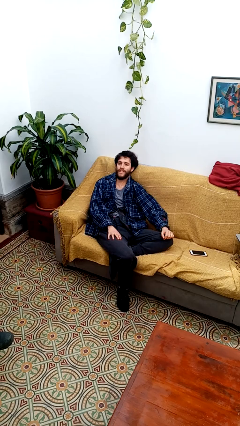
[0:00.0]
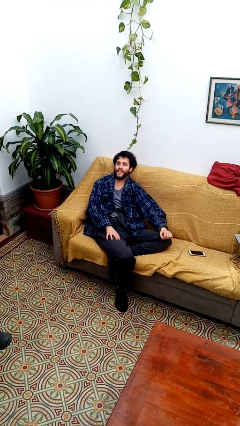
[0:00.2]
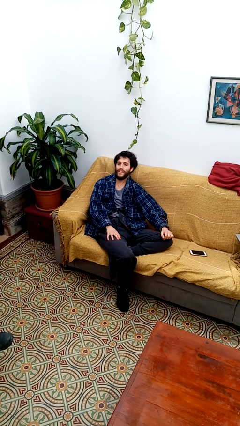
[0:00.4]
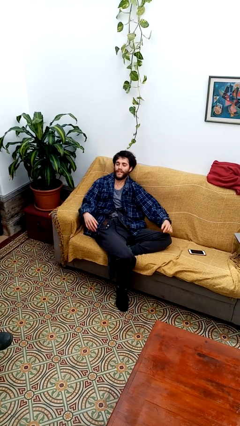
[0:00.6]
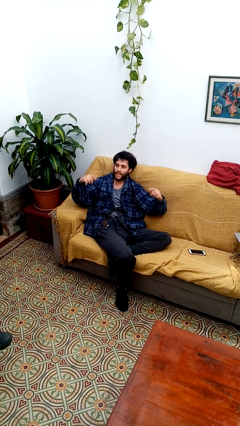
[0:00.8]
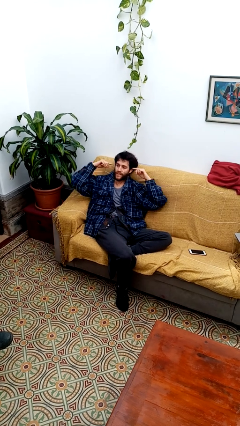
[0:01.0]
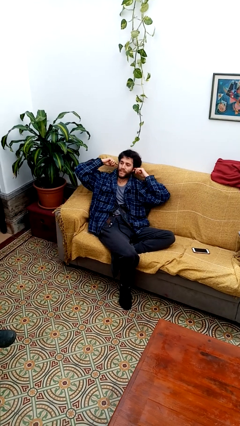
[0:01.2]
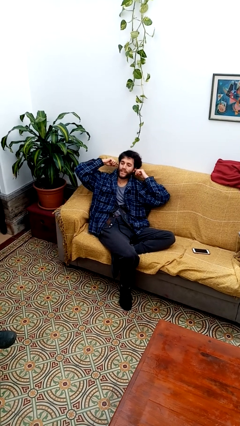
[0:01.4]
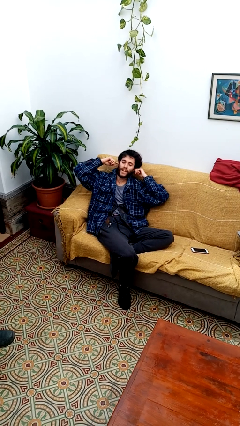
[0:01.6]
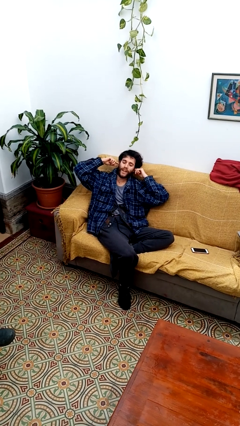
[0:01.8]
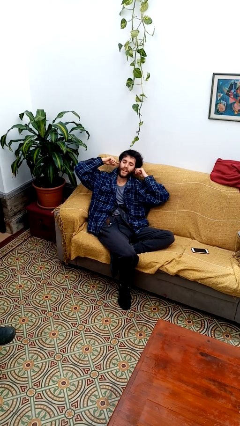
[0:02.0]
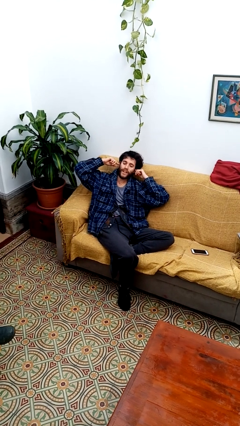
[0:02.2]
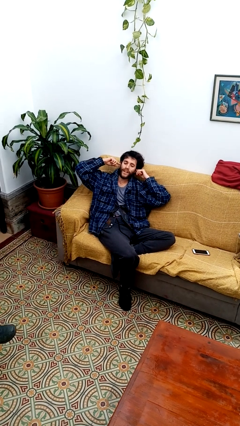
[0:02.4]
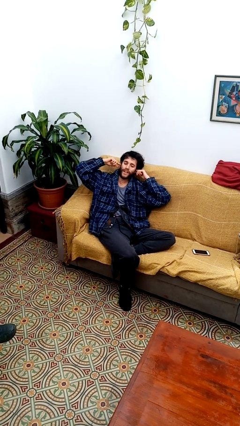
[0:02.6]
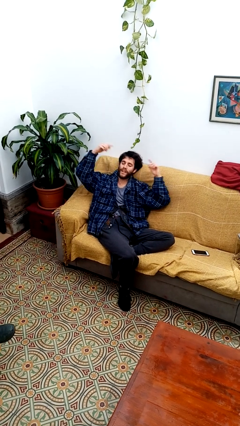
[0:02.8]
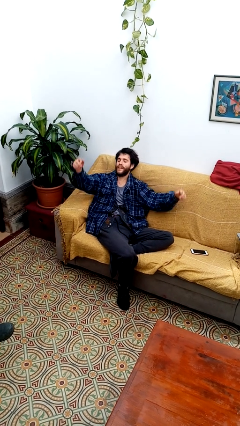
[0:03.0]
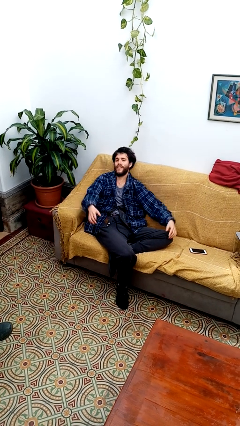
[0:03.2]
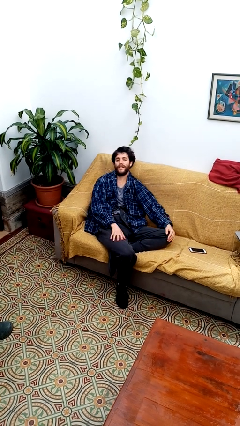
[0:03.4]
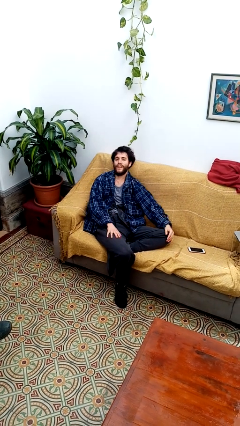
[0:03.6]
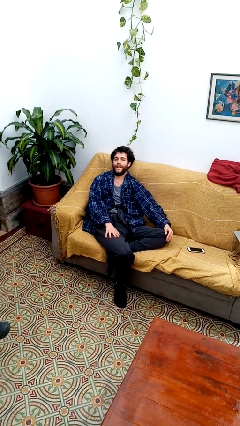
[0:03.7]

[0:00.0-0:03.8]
person puts fingers in ear

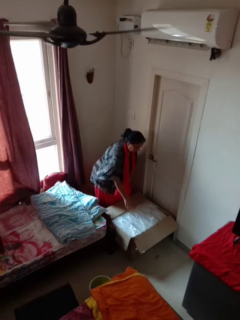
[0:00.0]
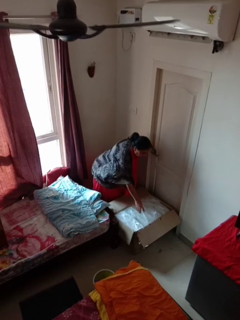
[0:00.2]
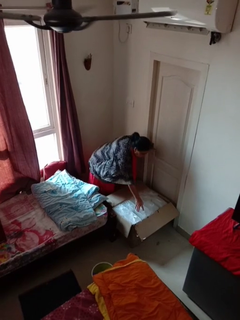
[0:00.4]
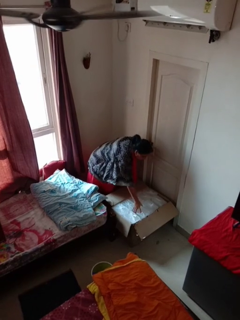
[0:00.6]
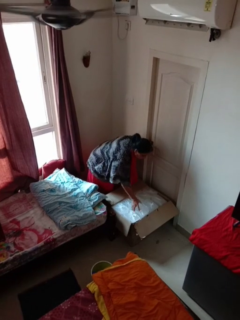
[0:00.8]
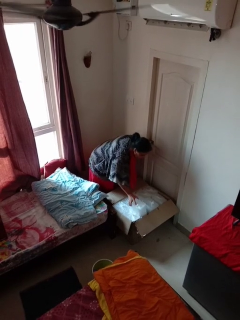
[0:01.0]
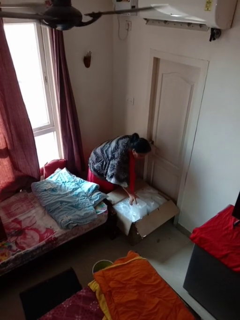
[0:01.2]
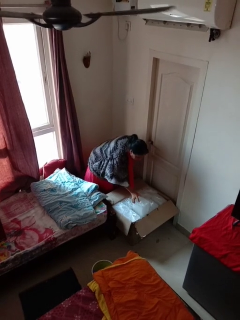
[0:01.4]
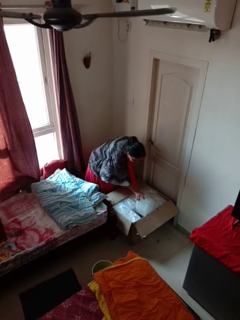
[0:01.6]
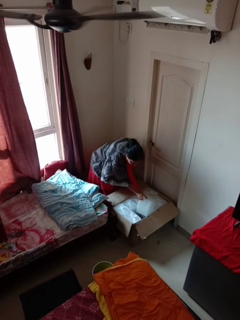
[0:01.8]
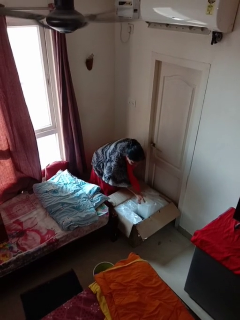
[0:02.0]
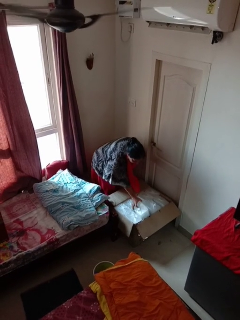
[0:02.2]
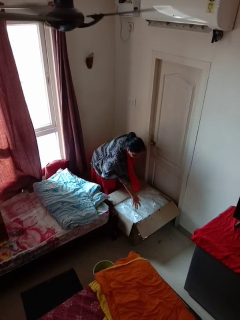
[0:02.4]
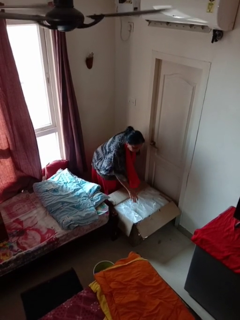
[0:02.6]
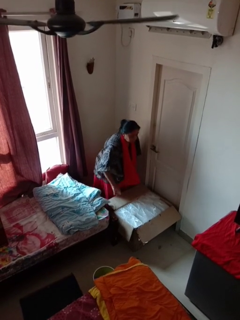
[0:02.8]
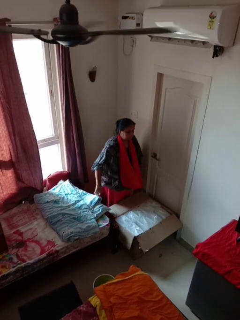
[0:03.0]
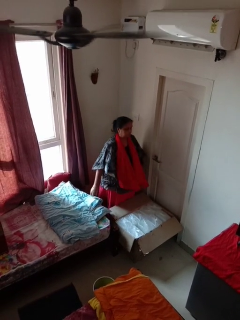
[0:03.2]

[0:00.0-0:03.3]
person searches in box

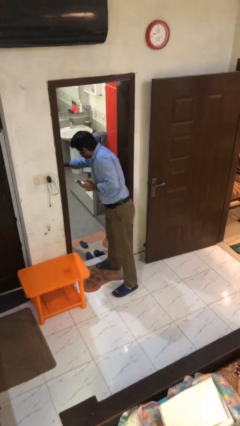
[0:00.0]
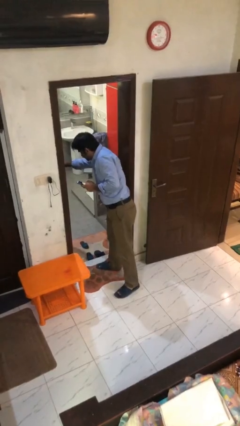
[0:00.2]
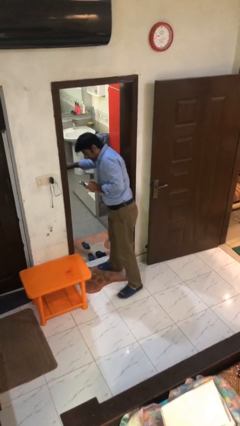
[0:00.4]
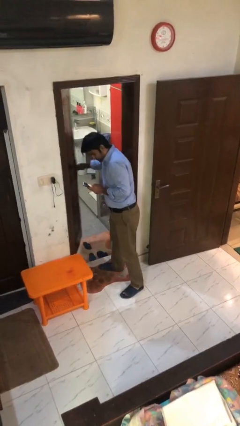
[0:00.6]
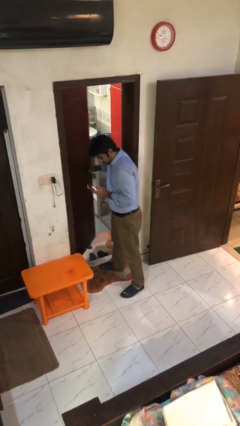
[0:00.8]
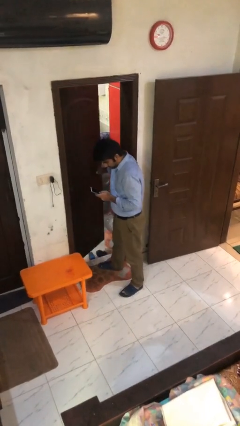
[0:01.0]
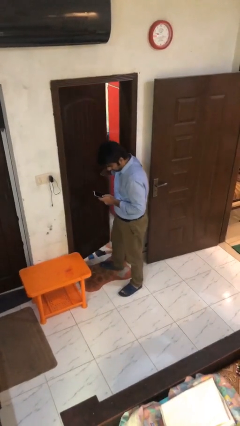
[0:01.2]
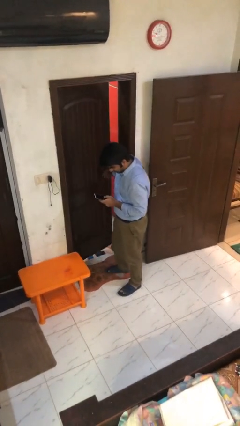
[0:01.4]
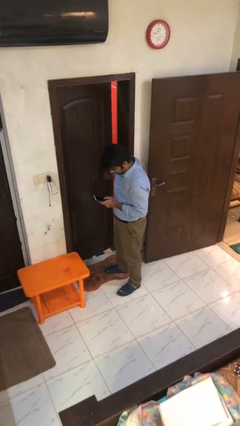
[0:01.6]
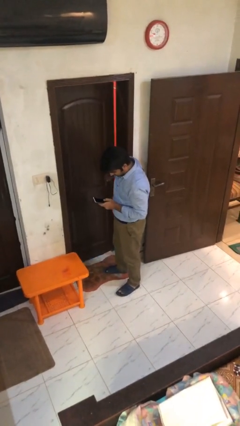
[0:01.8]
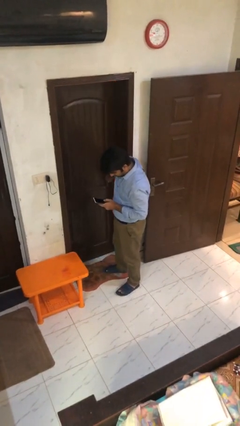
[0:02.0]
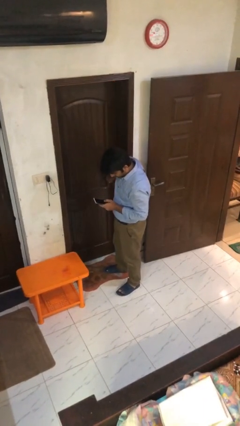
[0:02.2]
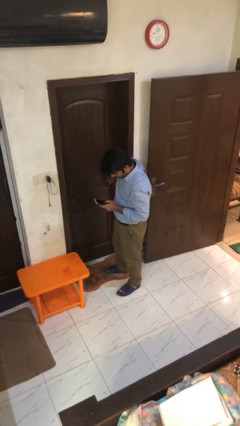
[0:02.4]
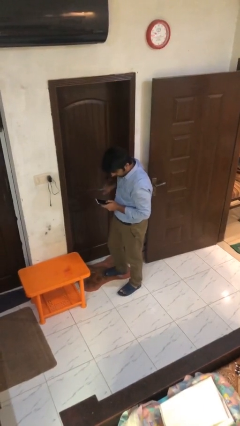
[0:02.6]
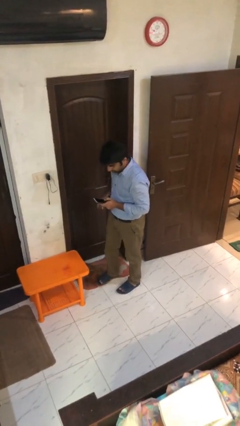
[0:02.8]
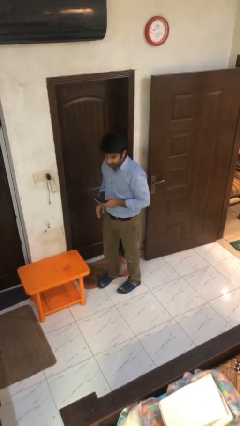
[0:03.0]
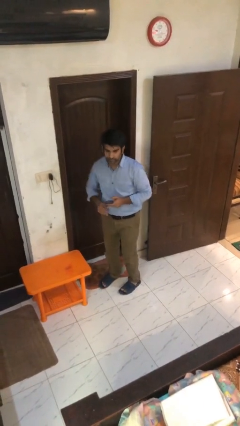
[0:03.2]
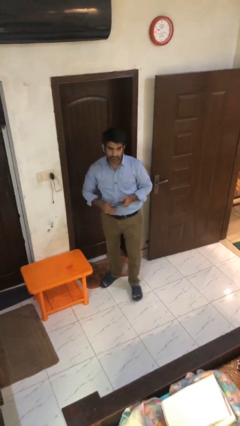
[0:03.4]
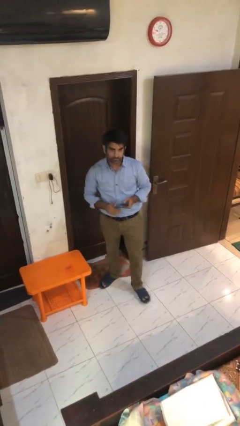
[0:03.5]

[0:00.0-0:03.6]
person closes facility door

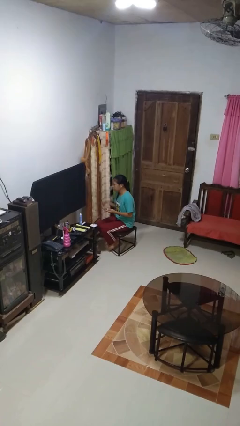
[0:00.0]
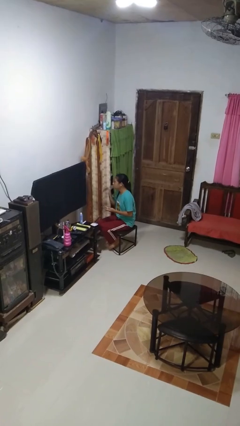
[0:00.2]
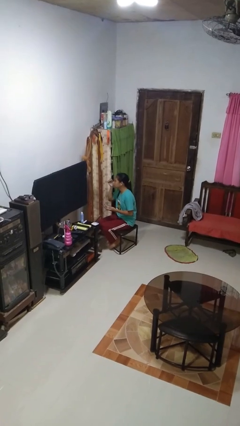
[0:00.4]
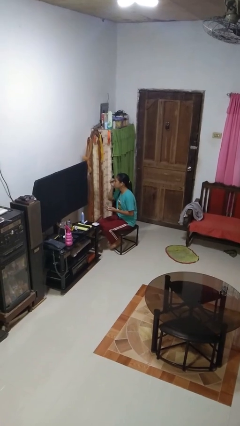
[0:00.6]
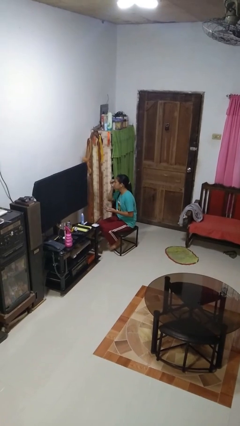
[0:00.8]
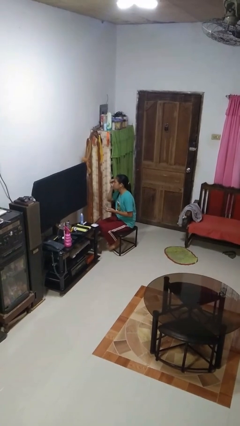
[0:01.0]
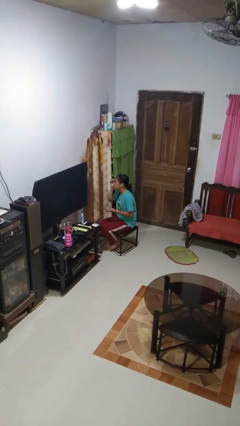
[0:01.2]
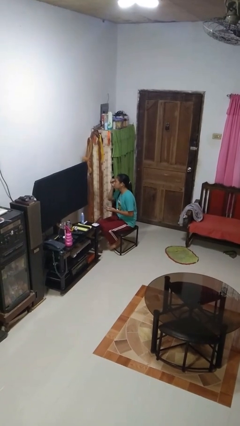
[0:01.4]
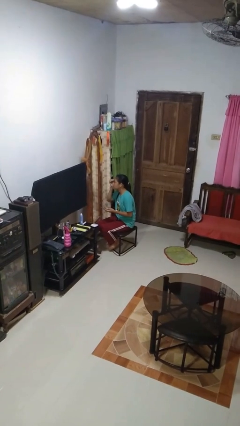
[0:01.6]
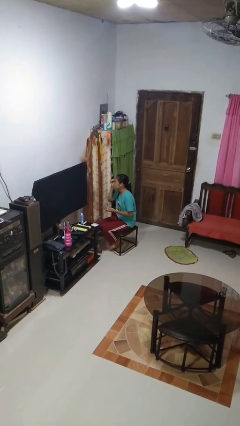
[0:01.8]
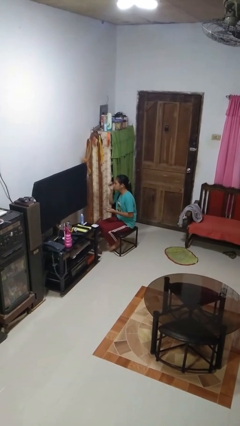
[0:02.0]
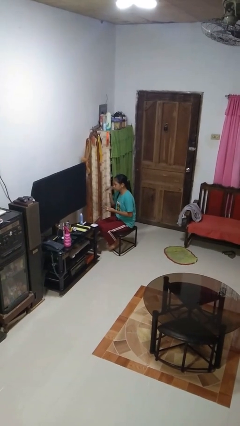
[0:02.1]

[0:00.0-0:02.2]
person applies eye makeup

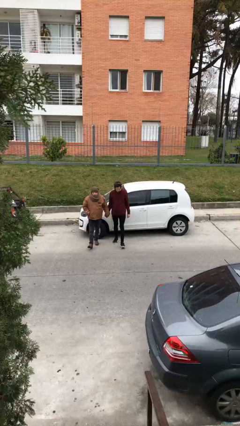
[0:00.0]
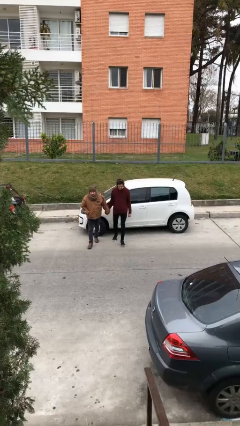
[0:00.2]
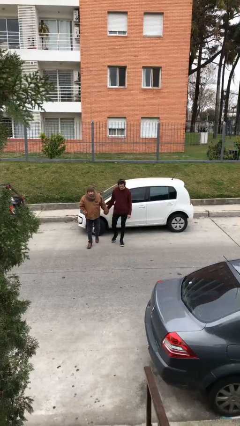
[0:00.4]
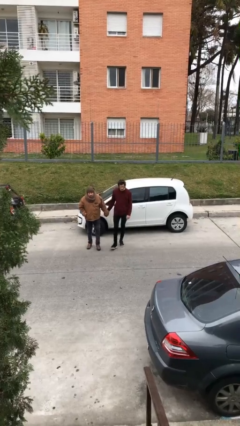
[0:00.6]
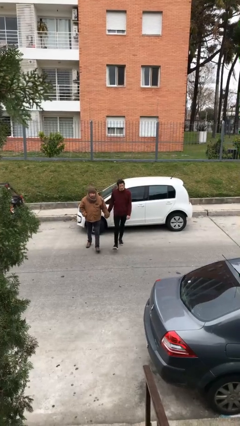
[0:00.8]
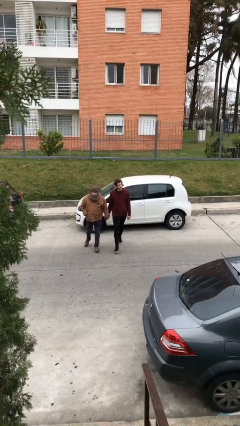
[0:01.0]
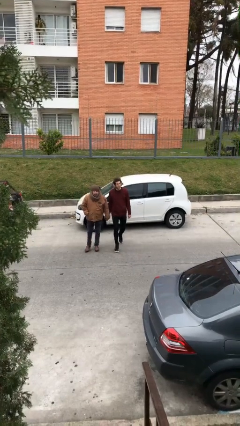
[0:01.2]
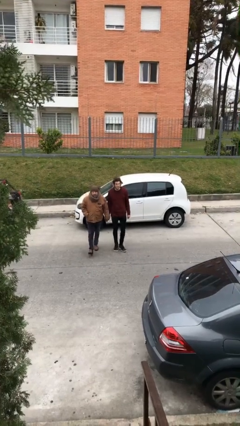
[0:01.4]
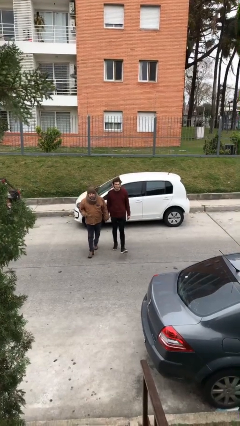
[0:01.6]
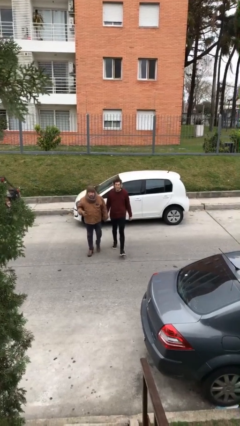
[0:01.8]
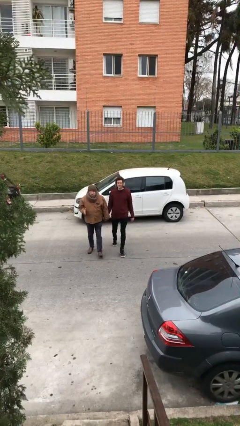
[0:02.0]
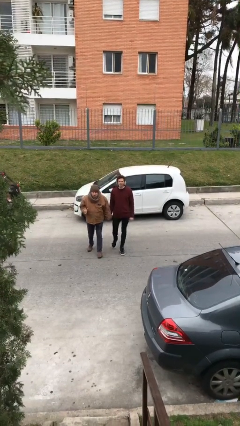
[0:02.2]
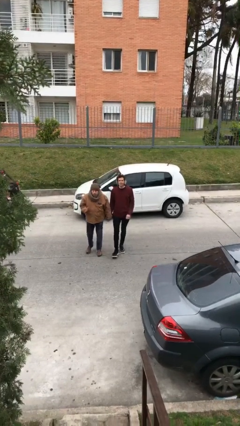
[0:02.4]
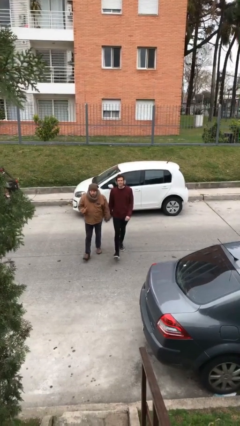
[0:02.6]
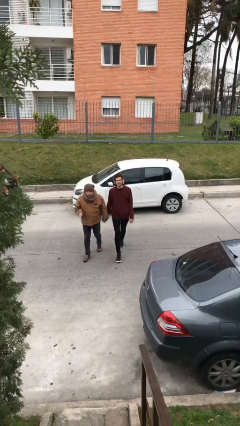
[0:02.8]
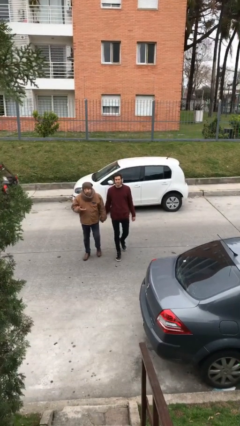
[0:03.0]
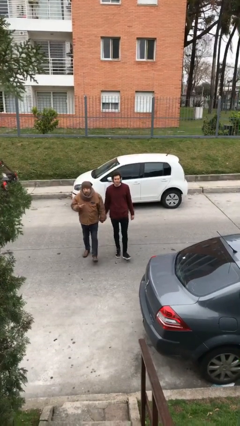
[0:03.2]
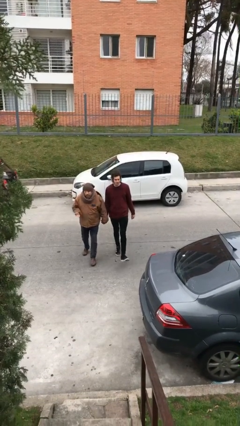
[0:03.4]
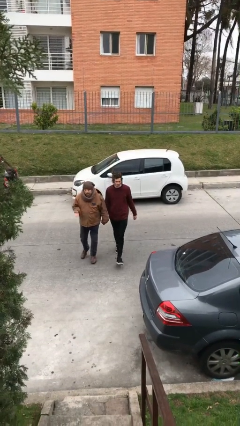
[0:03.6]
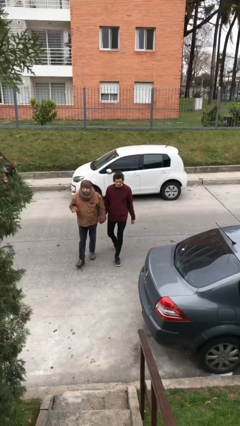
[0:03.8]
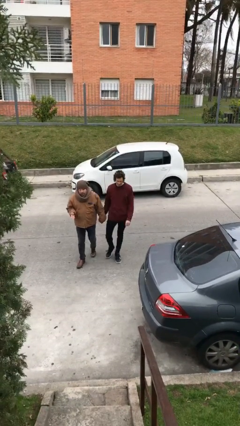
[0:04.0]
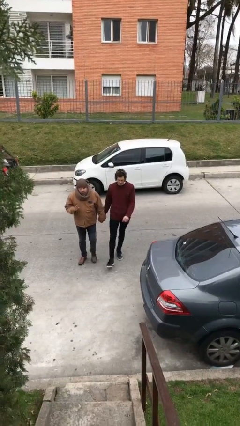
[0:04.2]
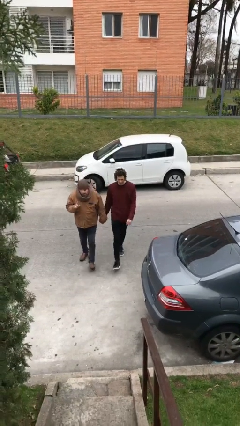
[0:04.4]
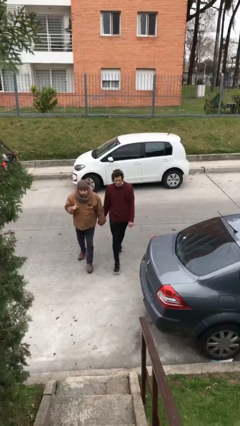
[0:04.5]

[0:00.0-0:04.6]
person holds hand

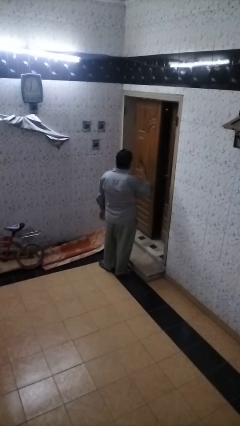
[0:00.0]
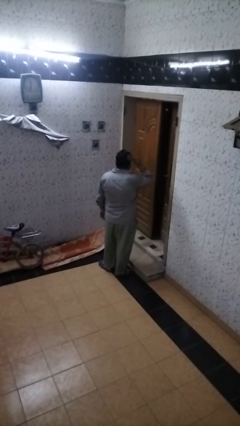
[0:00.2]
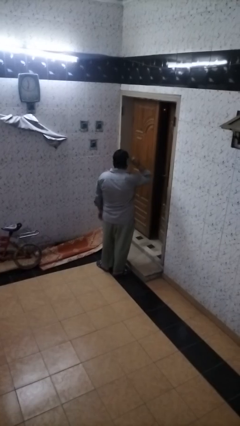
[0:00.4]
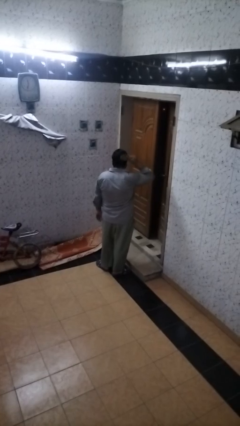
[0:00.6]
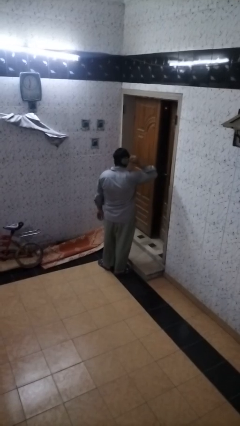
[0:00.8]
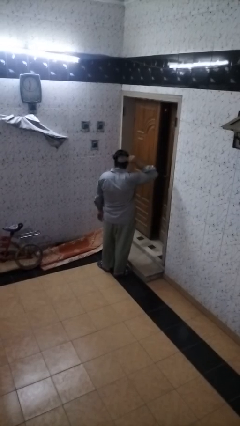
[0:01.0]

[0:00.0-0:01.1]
person brushes hair
